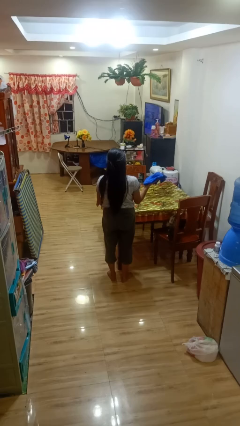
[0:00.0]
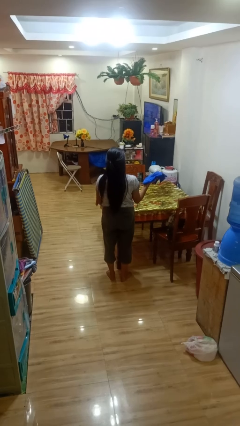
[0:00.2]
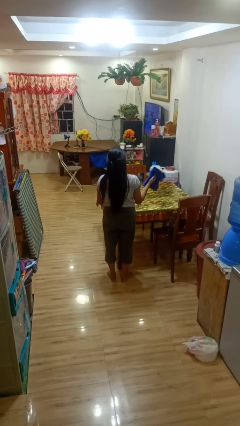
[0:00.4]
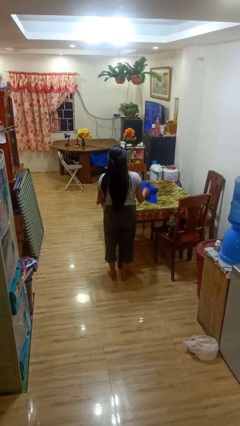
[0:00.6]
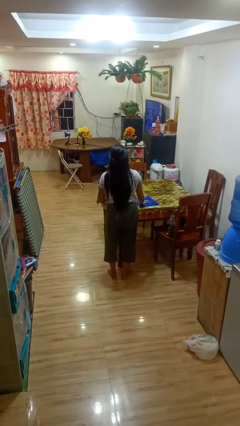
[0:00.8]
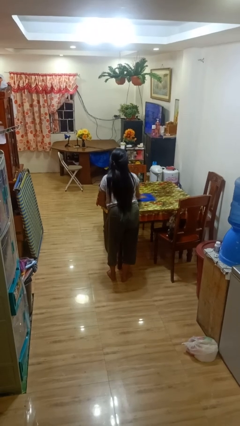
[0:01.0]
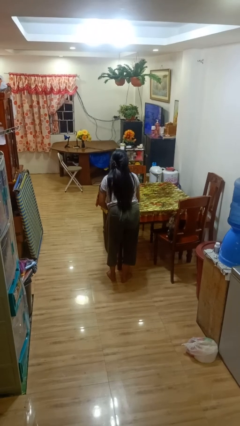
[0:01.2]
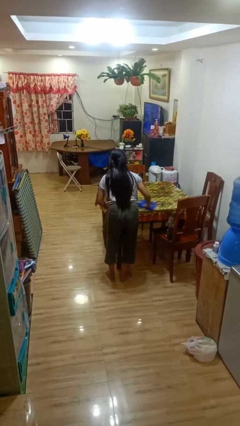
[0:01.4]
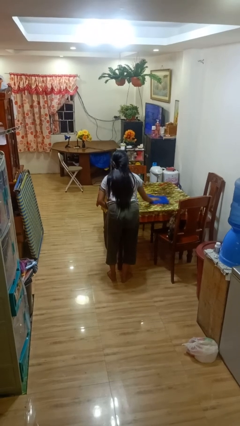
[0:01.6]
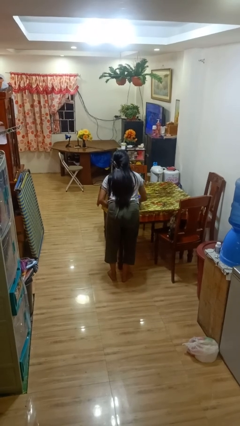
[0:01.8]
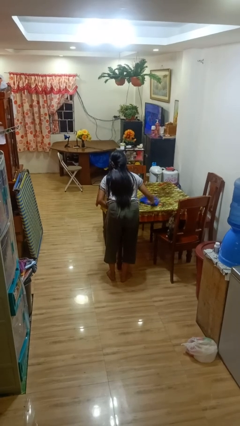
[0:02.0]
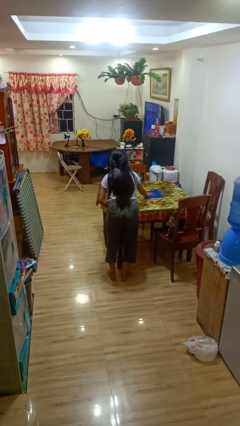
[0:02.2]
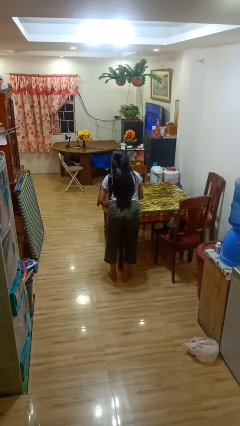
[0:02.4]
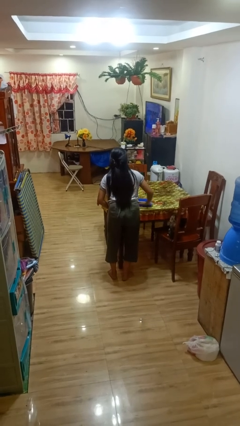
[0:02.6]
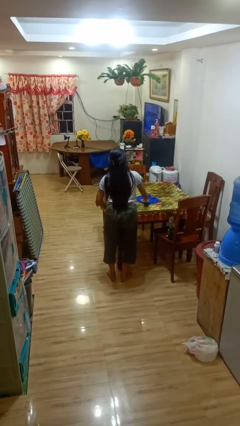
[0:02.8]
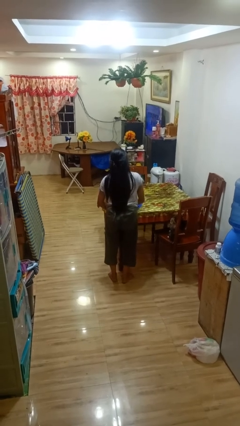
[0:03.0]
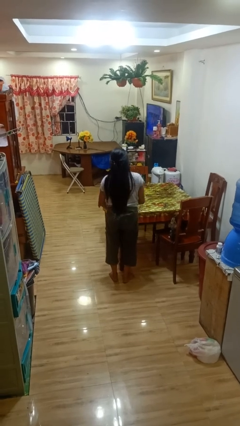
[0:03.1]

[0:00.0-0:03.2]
person cleans table with rag

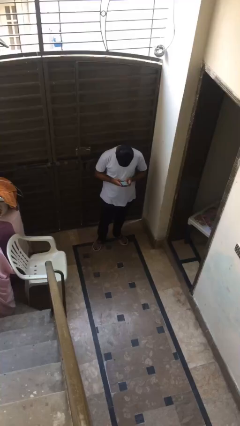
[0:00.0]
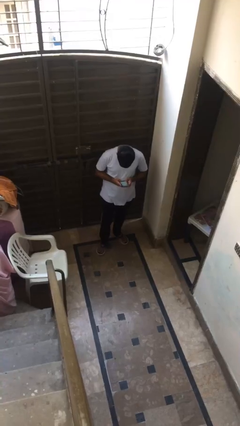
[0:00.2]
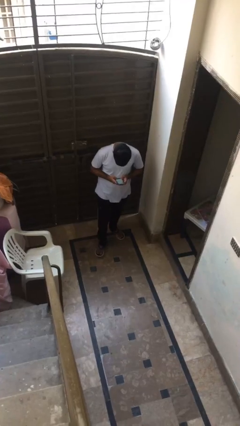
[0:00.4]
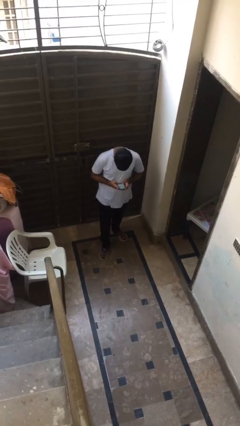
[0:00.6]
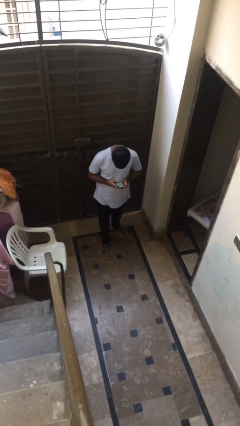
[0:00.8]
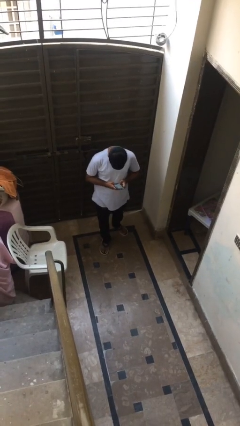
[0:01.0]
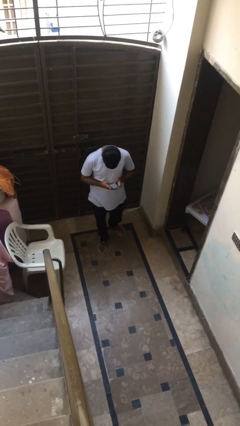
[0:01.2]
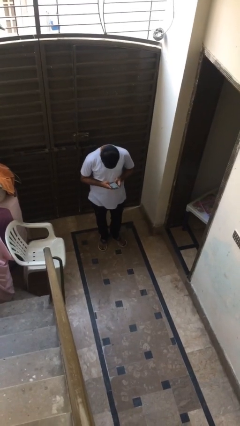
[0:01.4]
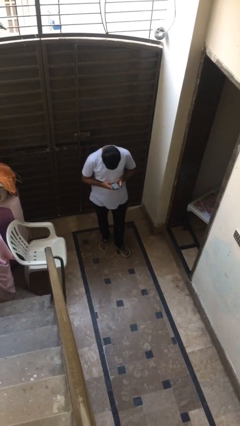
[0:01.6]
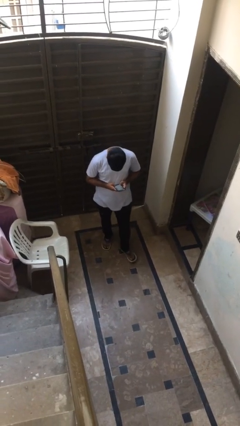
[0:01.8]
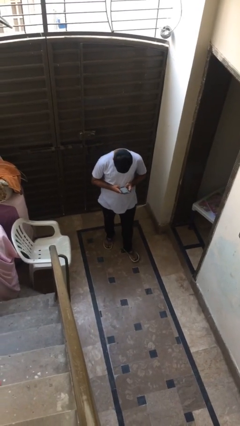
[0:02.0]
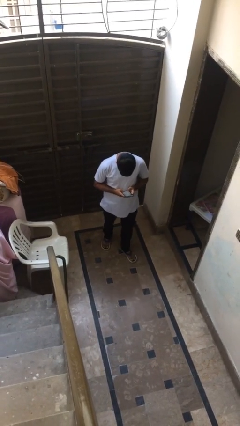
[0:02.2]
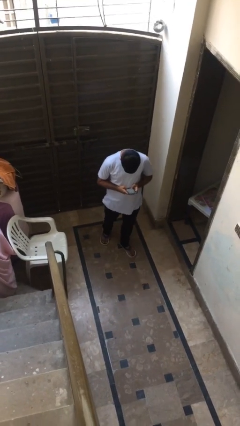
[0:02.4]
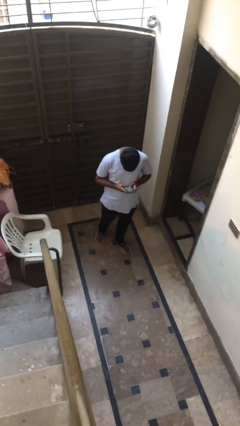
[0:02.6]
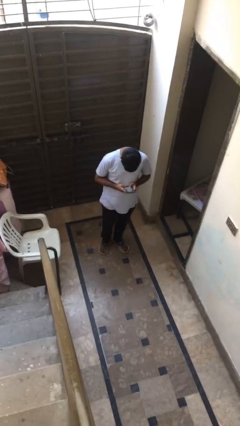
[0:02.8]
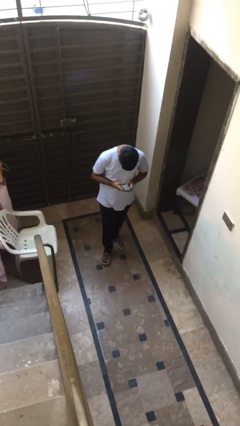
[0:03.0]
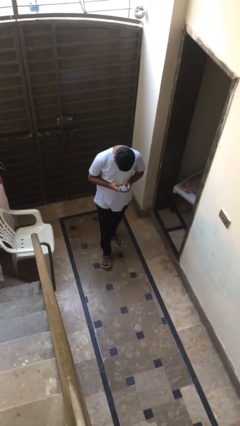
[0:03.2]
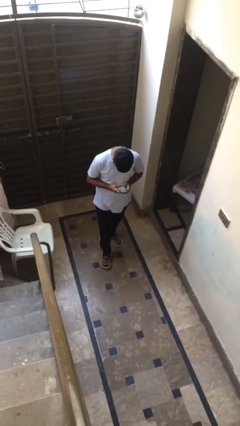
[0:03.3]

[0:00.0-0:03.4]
person texts on phone

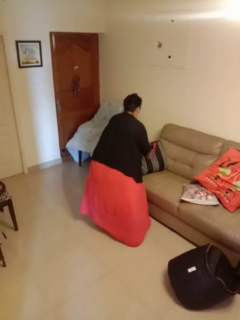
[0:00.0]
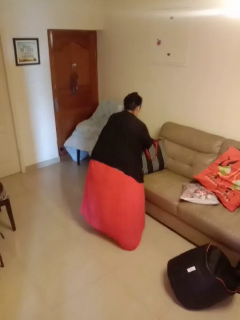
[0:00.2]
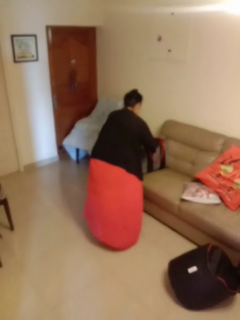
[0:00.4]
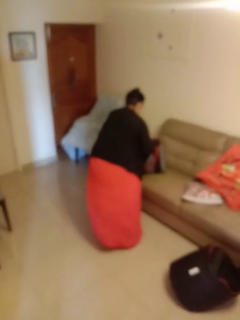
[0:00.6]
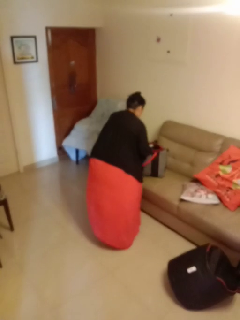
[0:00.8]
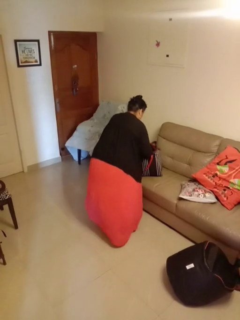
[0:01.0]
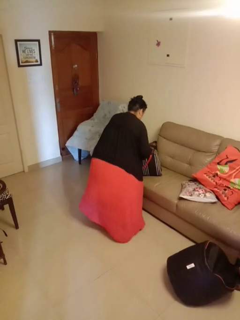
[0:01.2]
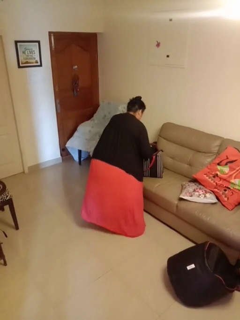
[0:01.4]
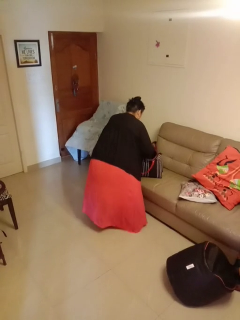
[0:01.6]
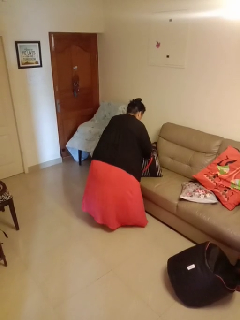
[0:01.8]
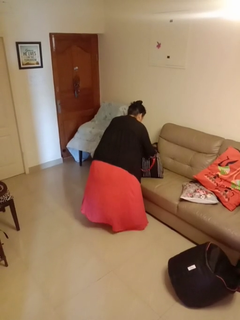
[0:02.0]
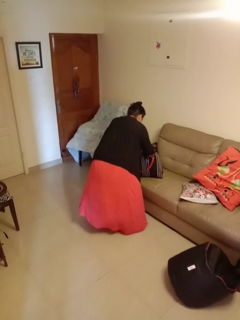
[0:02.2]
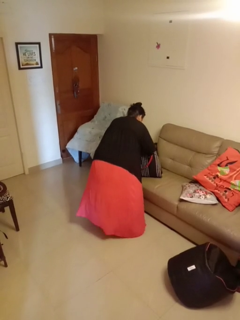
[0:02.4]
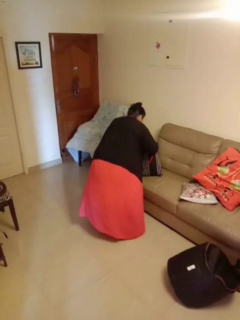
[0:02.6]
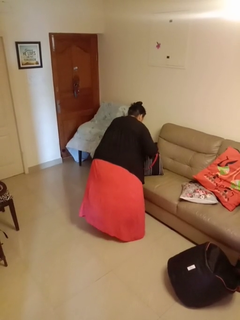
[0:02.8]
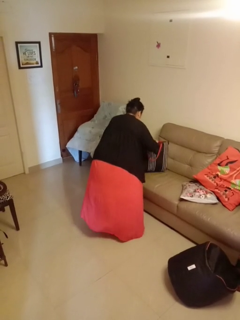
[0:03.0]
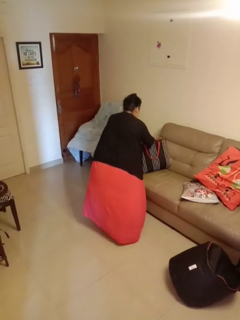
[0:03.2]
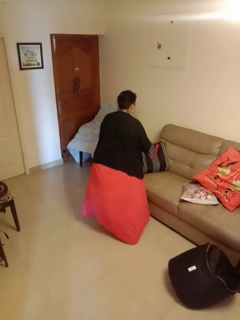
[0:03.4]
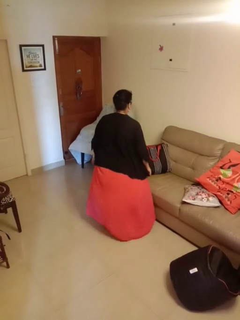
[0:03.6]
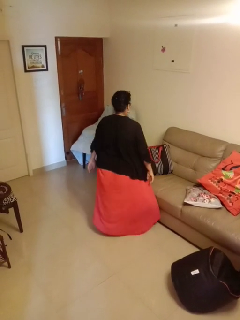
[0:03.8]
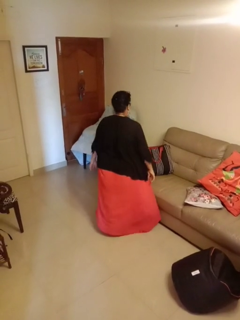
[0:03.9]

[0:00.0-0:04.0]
person searches in bag

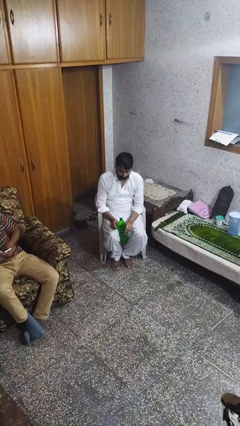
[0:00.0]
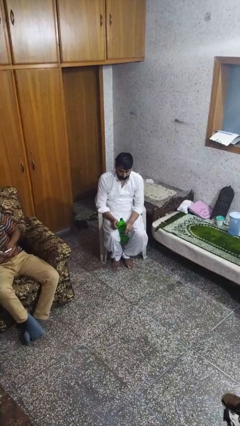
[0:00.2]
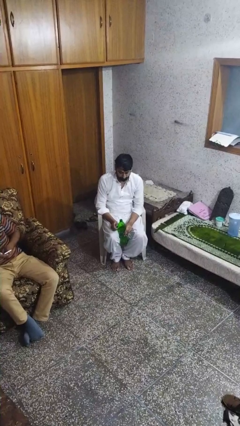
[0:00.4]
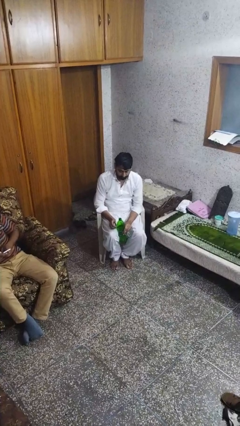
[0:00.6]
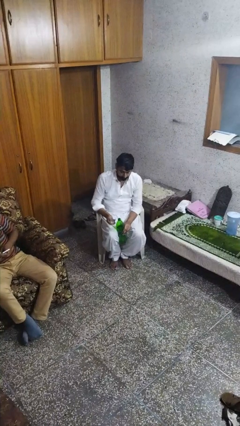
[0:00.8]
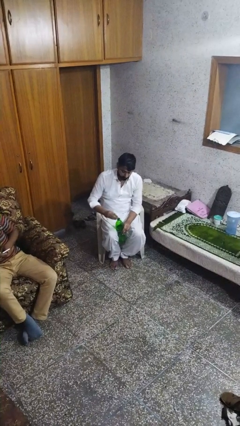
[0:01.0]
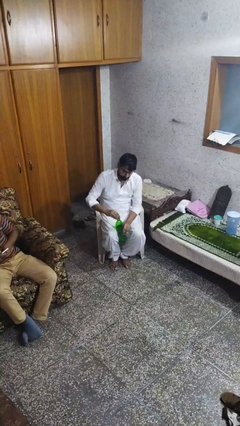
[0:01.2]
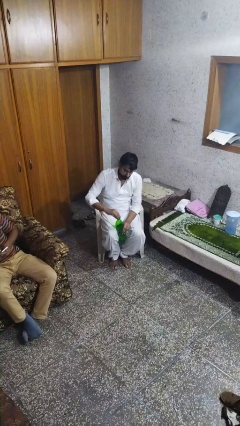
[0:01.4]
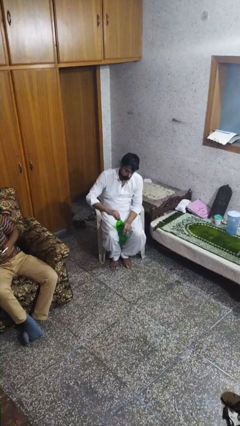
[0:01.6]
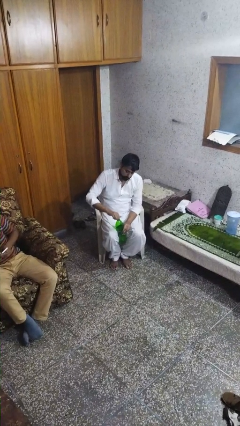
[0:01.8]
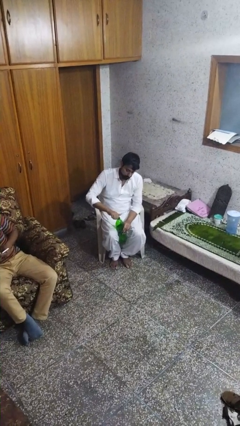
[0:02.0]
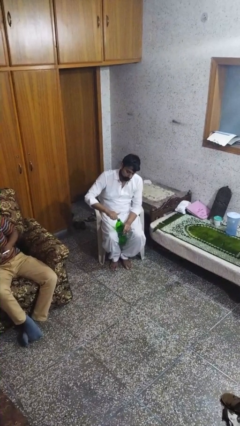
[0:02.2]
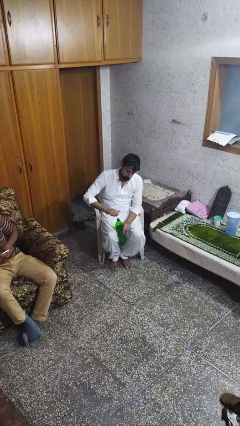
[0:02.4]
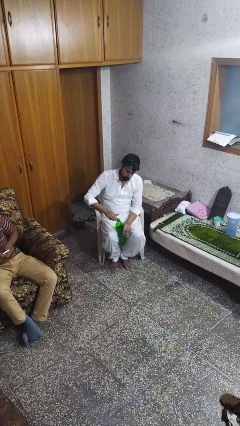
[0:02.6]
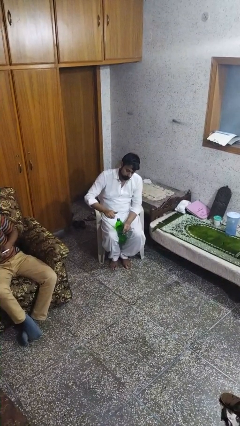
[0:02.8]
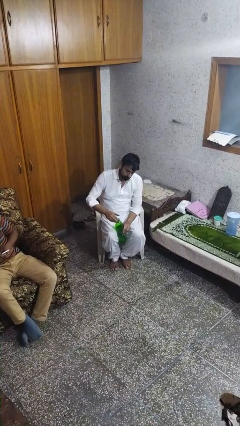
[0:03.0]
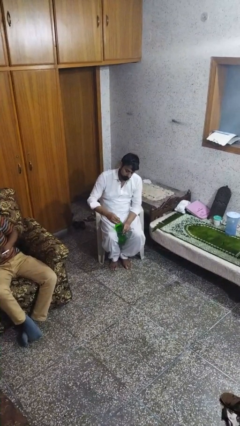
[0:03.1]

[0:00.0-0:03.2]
person screws lid to bottle

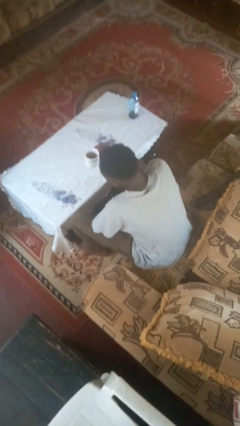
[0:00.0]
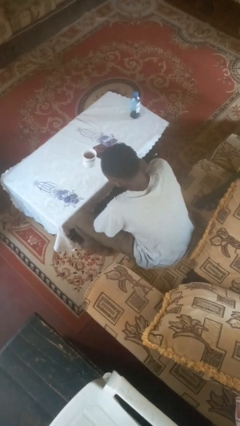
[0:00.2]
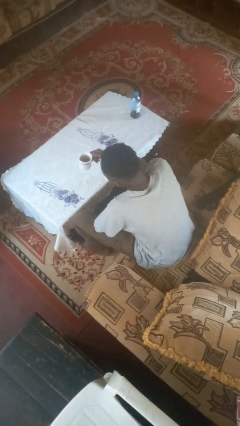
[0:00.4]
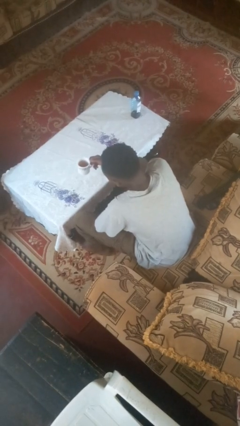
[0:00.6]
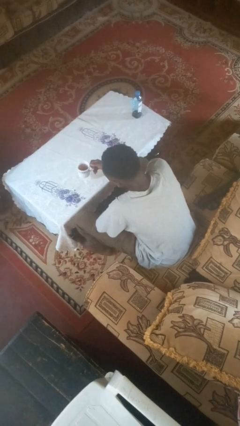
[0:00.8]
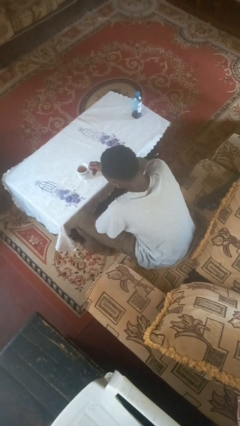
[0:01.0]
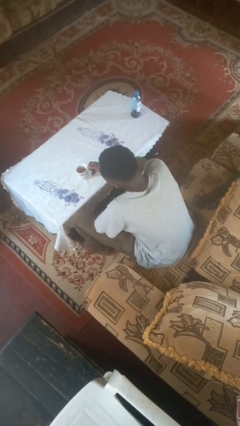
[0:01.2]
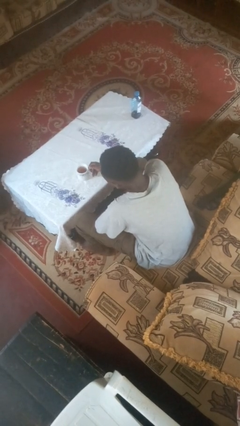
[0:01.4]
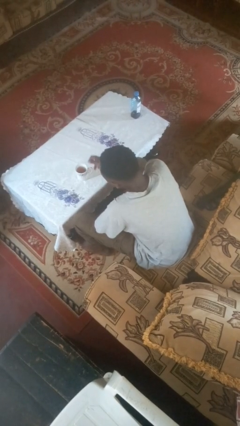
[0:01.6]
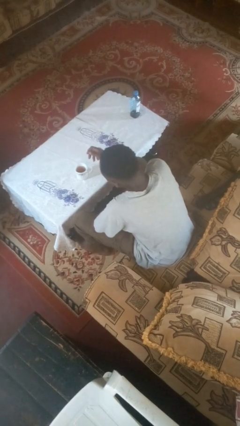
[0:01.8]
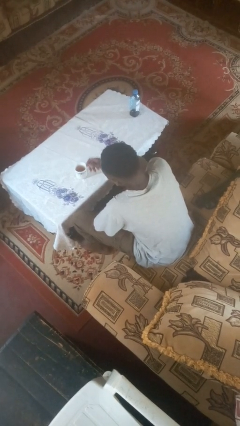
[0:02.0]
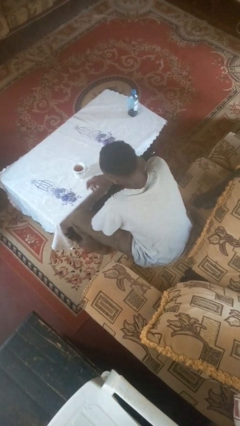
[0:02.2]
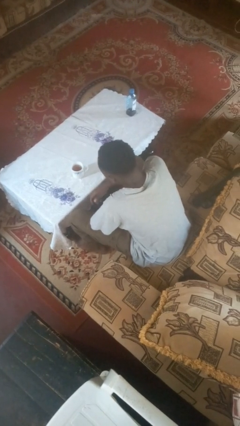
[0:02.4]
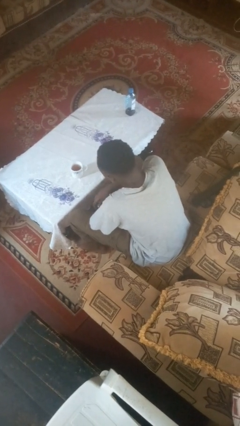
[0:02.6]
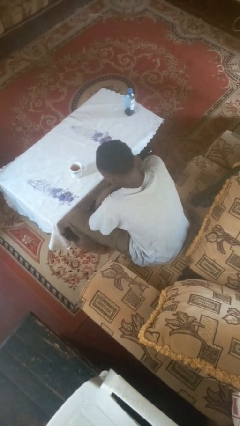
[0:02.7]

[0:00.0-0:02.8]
person puts down object on table

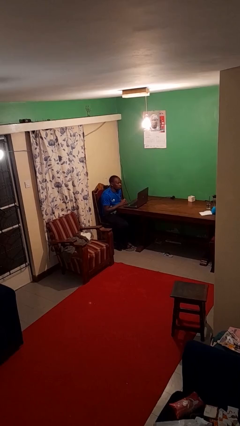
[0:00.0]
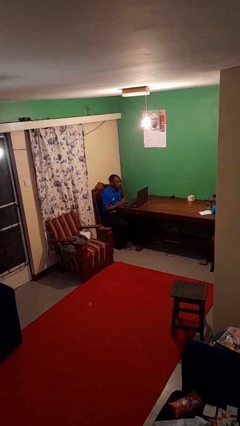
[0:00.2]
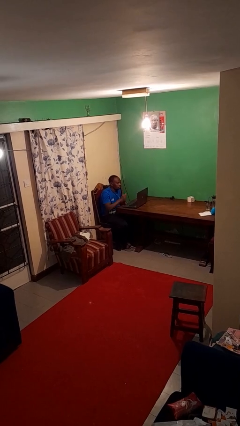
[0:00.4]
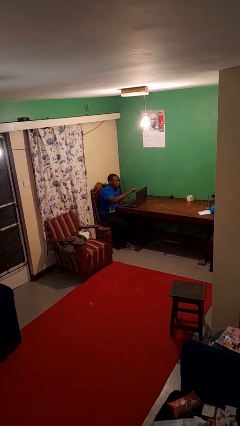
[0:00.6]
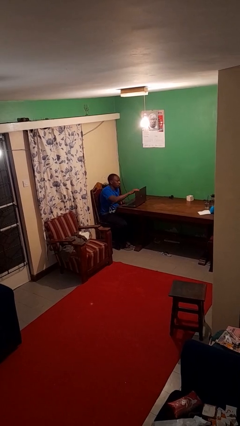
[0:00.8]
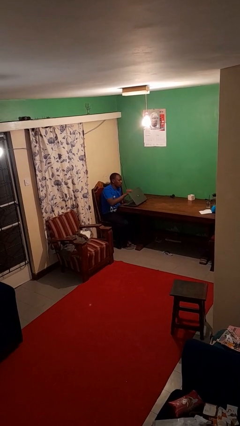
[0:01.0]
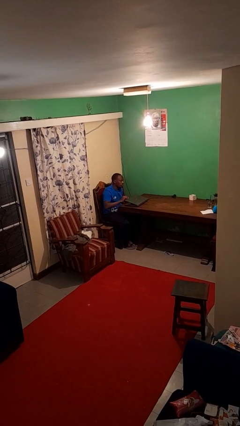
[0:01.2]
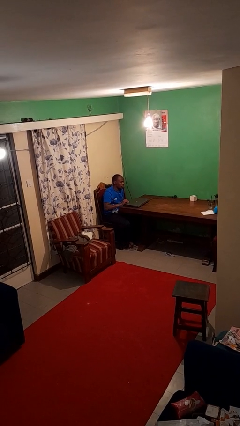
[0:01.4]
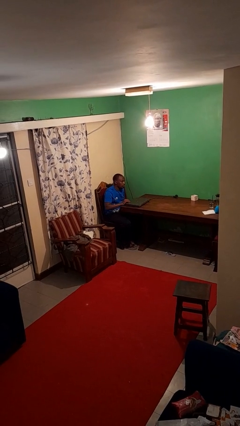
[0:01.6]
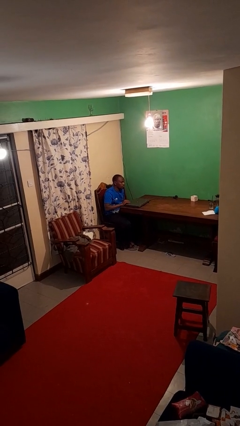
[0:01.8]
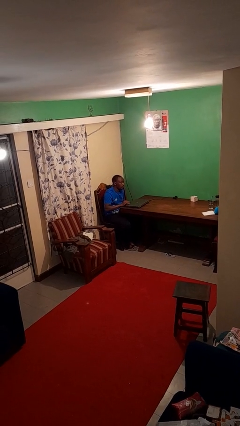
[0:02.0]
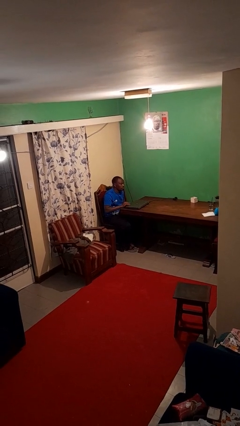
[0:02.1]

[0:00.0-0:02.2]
person closes laptop
